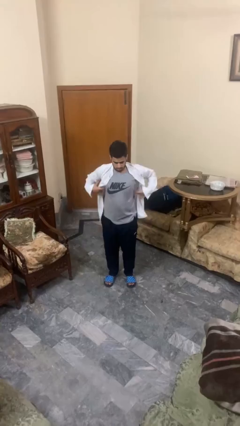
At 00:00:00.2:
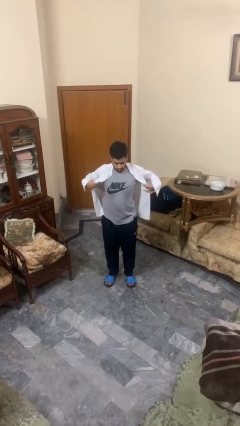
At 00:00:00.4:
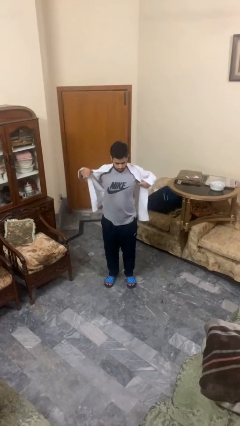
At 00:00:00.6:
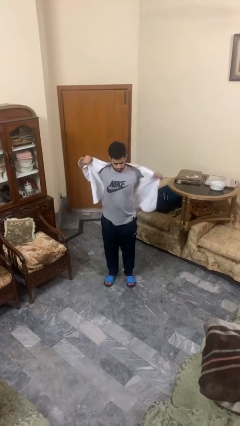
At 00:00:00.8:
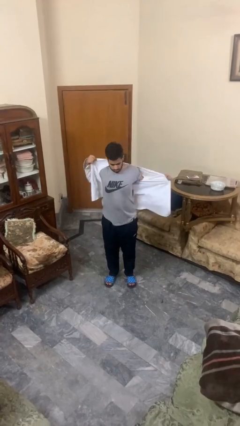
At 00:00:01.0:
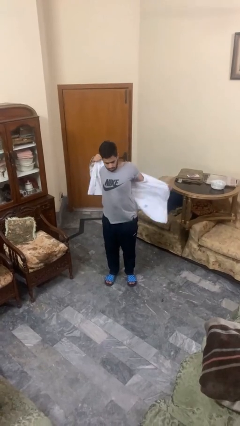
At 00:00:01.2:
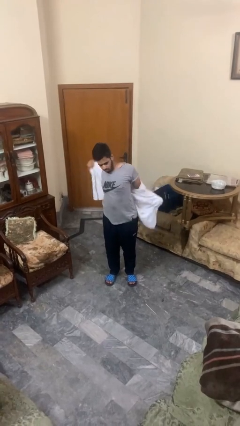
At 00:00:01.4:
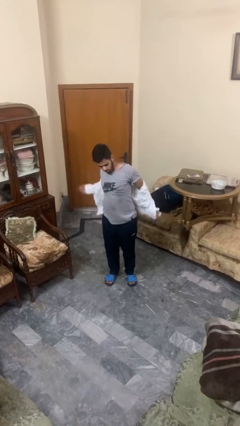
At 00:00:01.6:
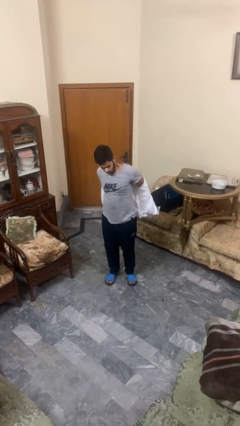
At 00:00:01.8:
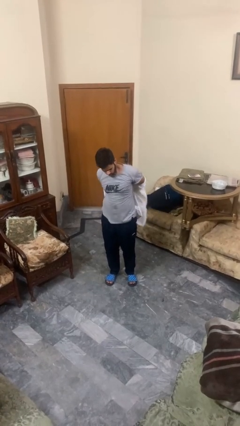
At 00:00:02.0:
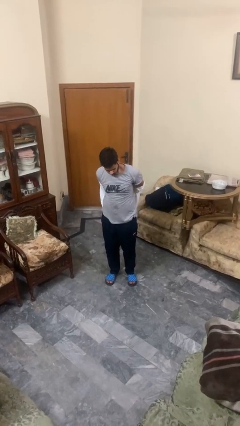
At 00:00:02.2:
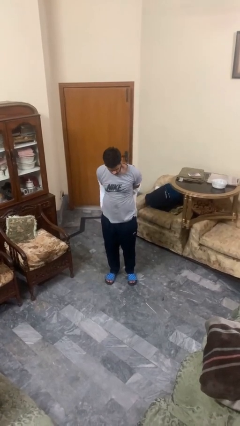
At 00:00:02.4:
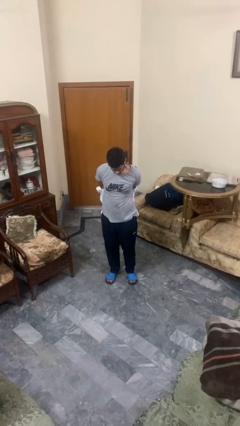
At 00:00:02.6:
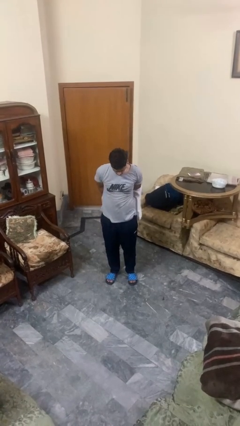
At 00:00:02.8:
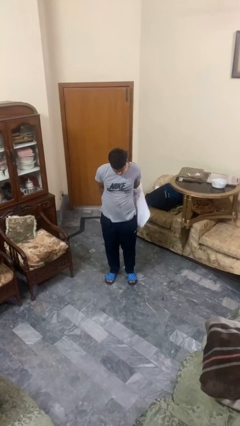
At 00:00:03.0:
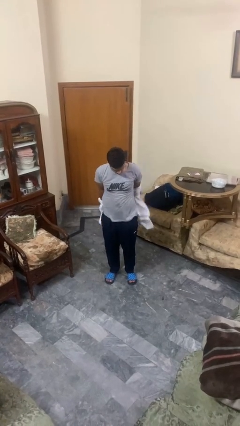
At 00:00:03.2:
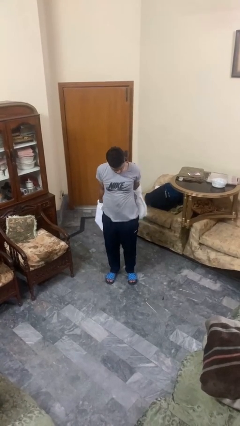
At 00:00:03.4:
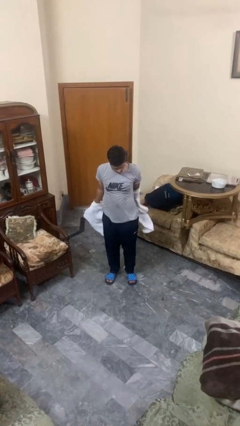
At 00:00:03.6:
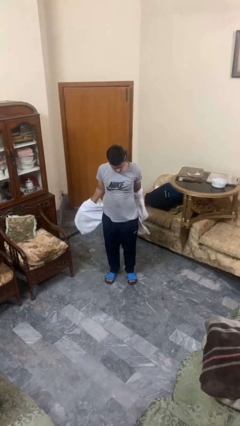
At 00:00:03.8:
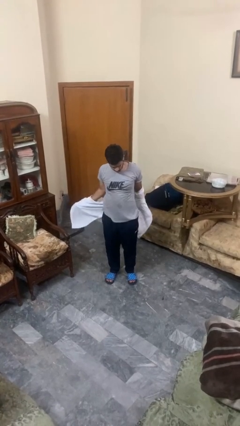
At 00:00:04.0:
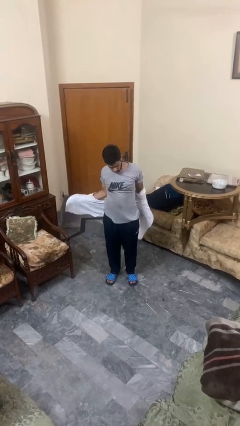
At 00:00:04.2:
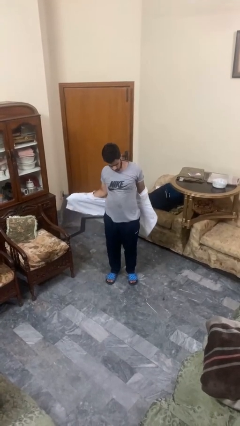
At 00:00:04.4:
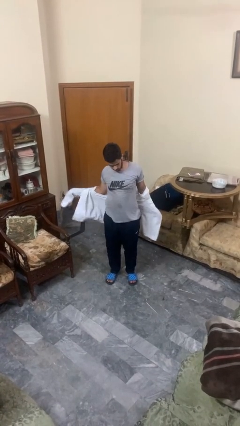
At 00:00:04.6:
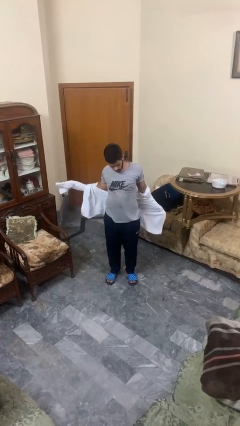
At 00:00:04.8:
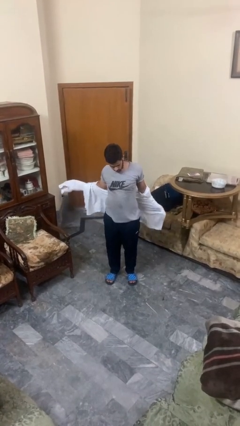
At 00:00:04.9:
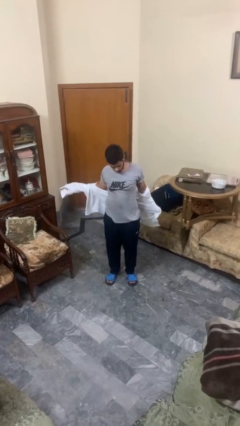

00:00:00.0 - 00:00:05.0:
person takes off shirt

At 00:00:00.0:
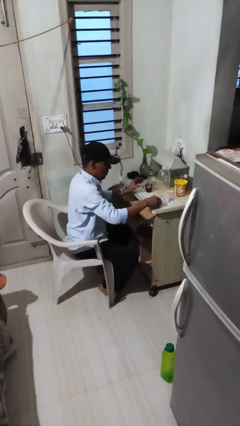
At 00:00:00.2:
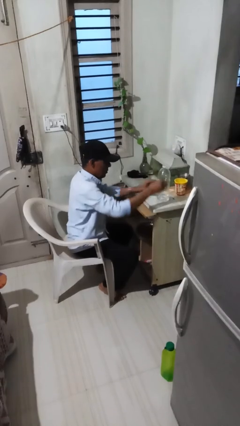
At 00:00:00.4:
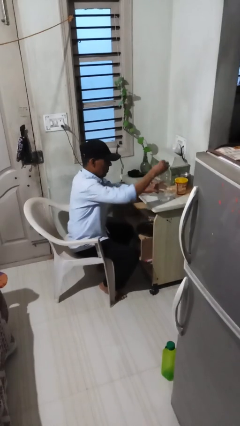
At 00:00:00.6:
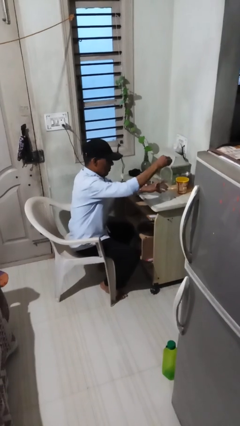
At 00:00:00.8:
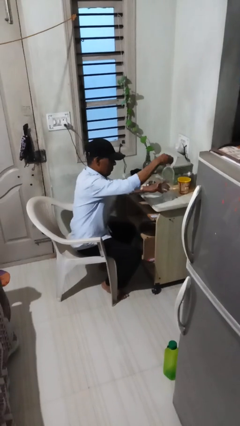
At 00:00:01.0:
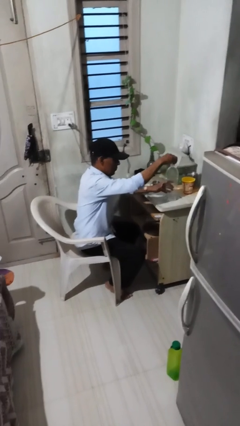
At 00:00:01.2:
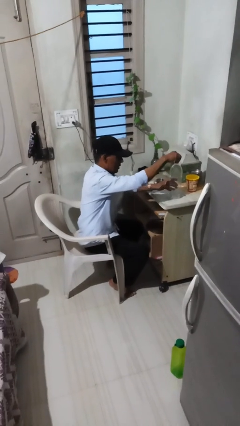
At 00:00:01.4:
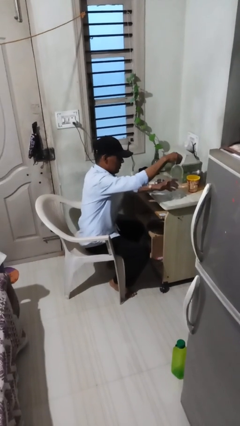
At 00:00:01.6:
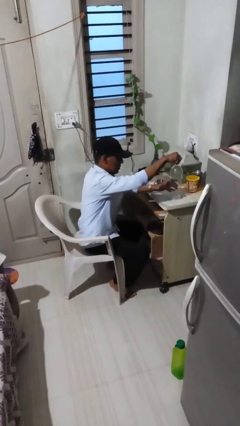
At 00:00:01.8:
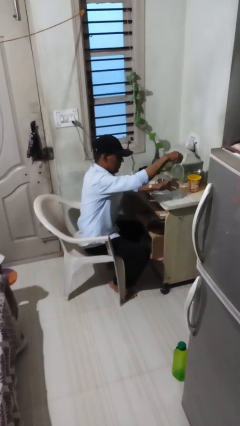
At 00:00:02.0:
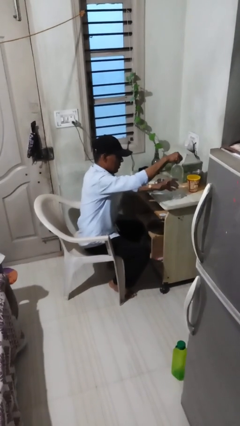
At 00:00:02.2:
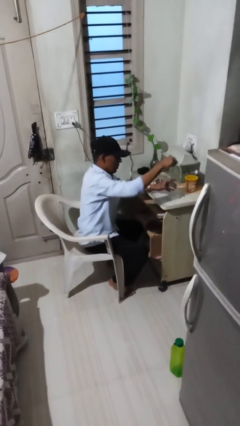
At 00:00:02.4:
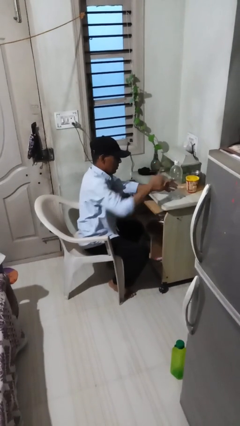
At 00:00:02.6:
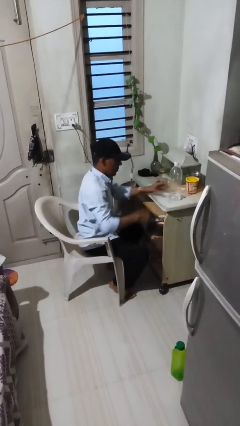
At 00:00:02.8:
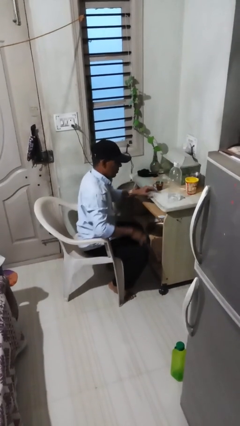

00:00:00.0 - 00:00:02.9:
person screws lid to bottle

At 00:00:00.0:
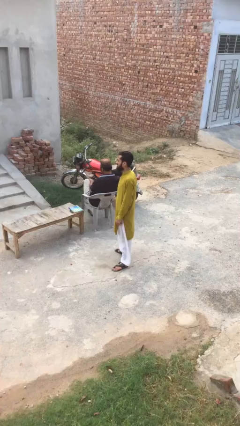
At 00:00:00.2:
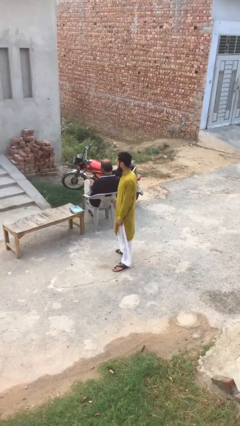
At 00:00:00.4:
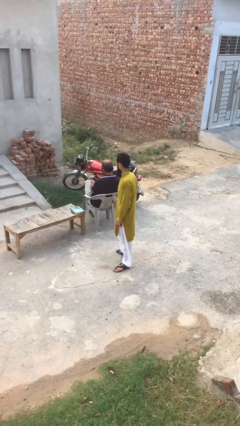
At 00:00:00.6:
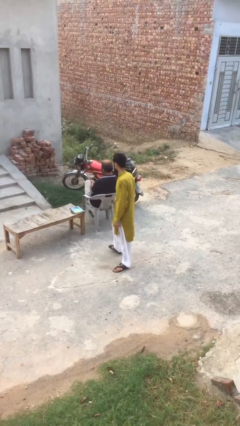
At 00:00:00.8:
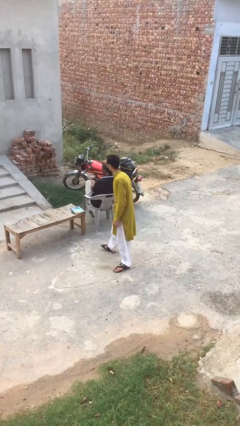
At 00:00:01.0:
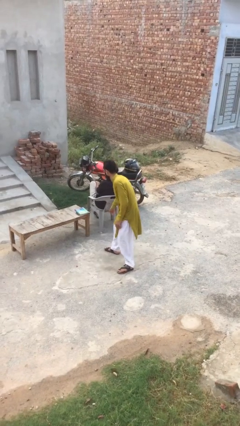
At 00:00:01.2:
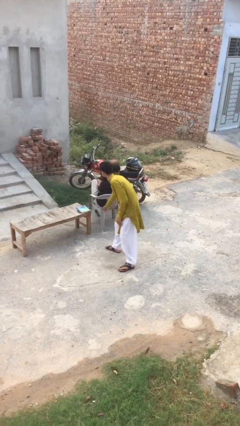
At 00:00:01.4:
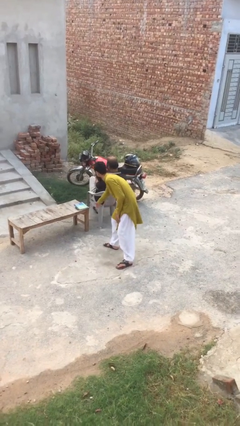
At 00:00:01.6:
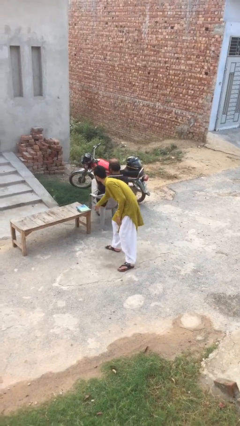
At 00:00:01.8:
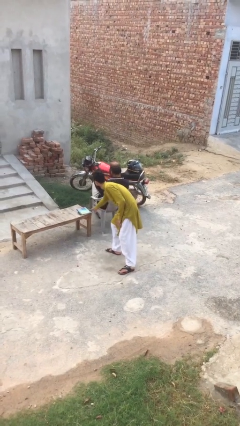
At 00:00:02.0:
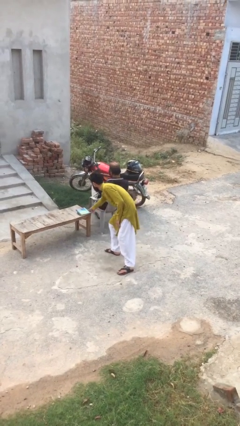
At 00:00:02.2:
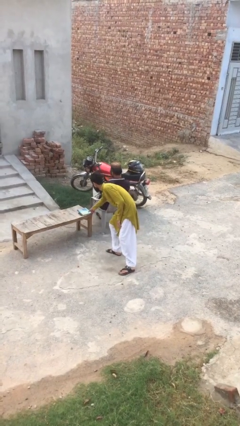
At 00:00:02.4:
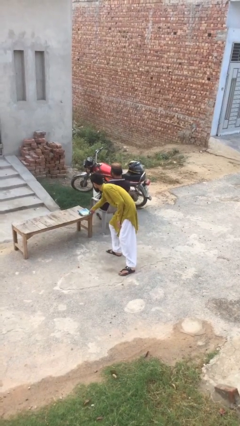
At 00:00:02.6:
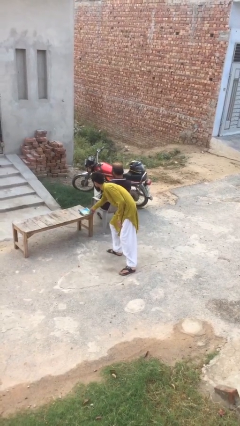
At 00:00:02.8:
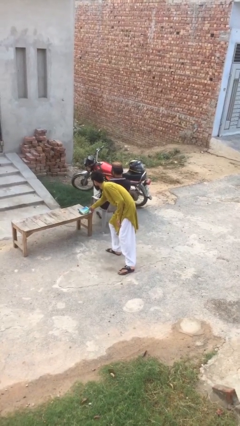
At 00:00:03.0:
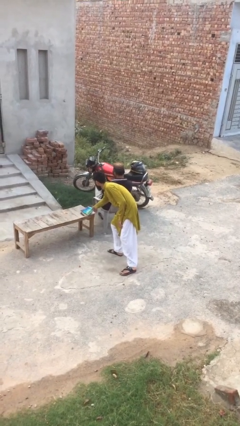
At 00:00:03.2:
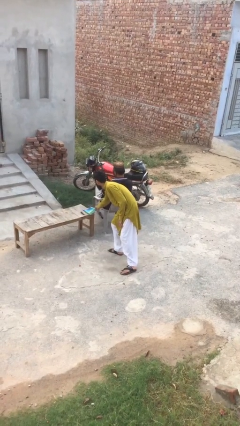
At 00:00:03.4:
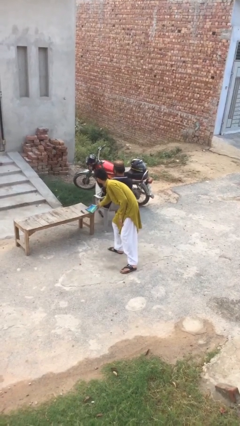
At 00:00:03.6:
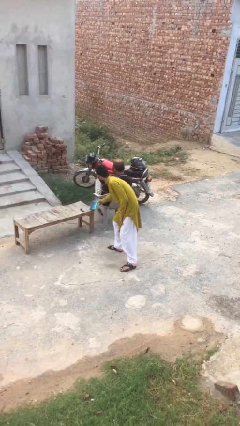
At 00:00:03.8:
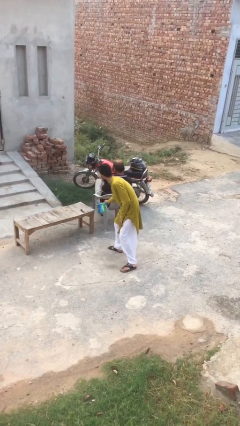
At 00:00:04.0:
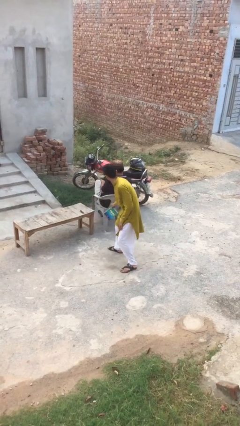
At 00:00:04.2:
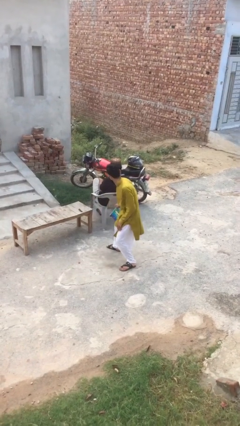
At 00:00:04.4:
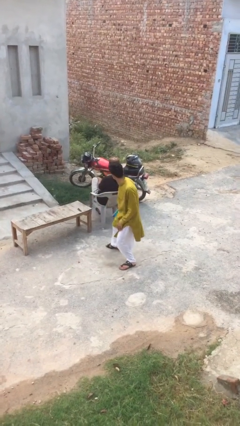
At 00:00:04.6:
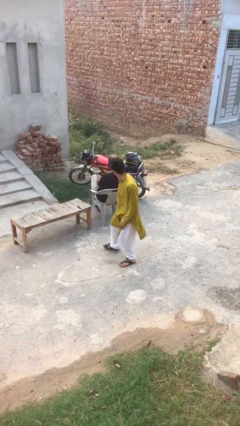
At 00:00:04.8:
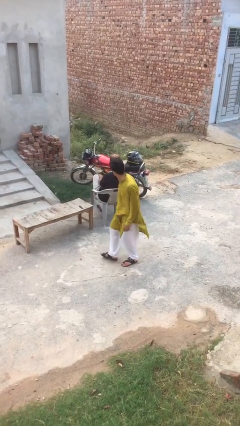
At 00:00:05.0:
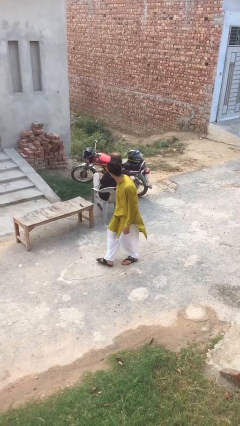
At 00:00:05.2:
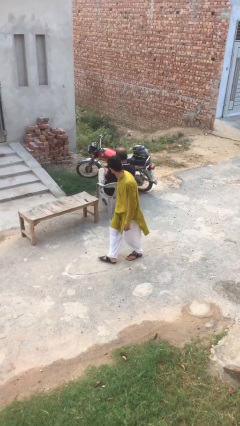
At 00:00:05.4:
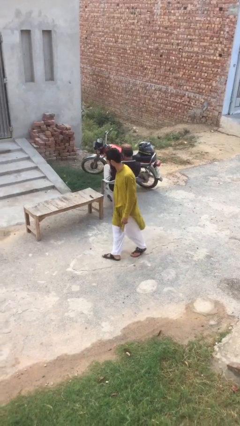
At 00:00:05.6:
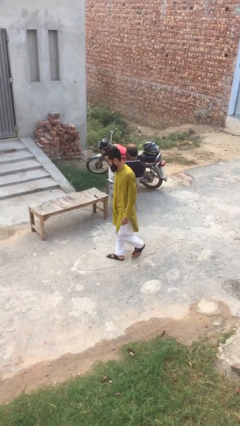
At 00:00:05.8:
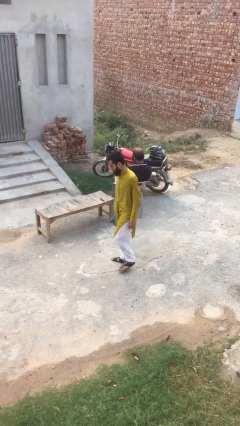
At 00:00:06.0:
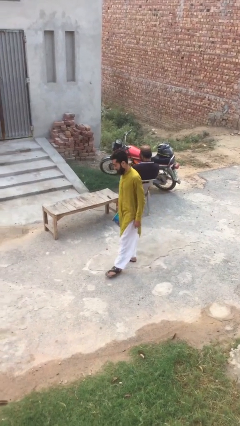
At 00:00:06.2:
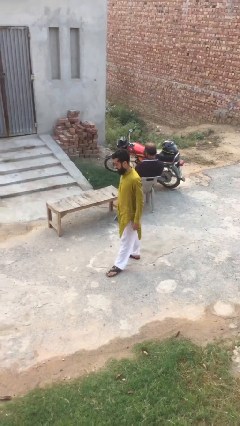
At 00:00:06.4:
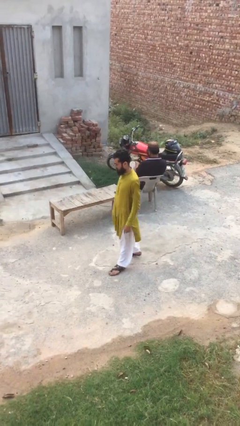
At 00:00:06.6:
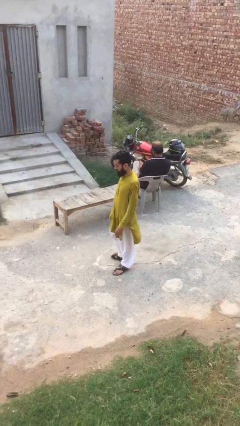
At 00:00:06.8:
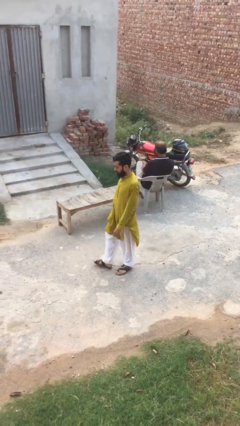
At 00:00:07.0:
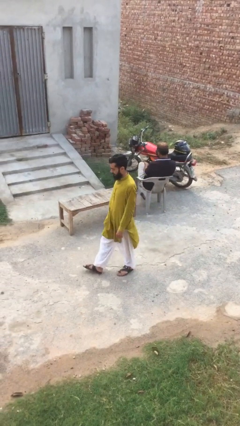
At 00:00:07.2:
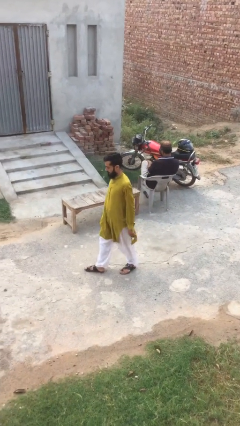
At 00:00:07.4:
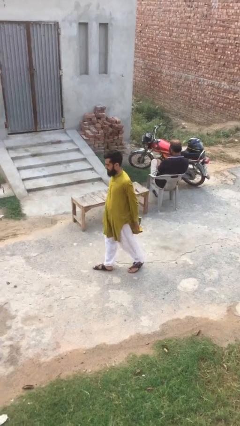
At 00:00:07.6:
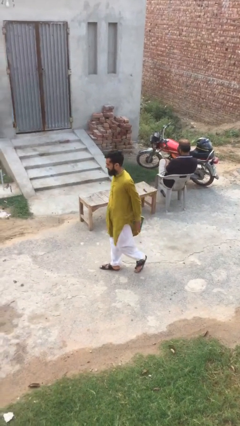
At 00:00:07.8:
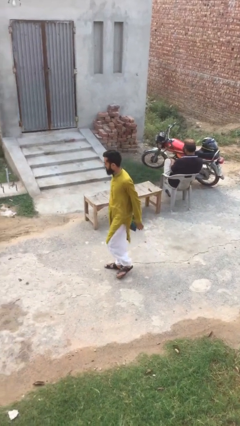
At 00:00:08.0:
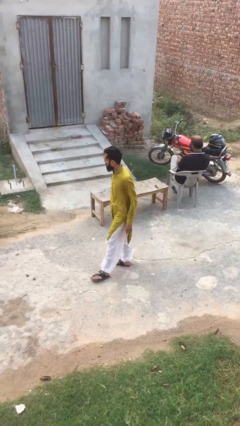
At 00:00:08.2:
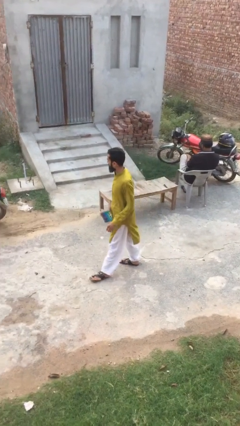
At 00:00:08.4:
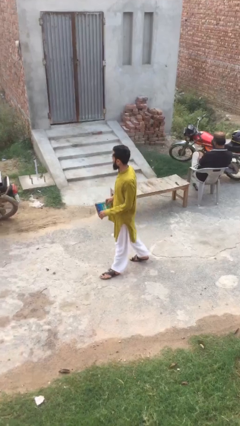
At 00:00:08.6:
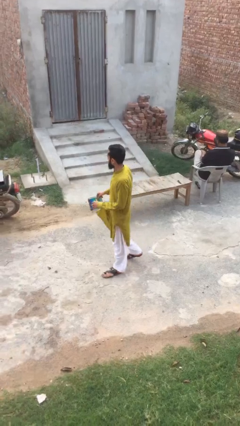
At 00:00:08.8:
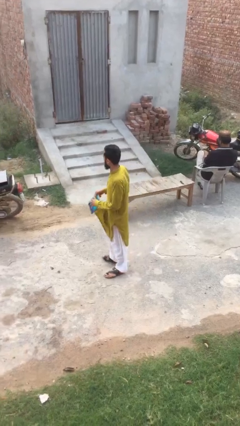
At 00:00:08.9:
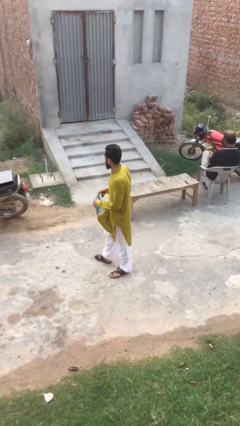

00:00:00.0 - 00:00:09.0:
person steals object from person

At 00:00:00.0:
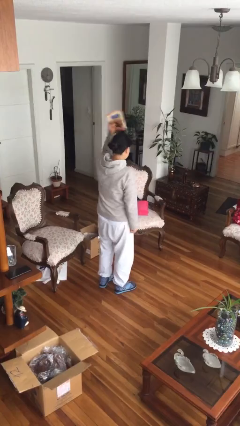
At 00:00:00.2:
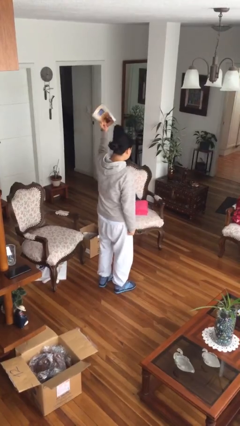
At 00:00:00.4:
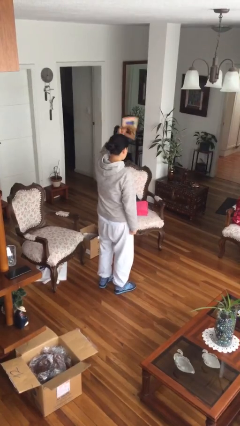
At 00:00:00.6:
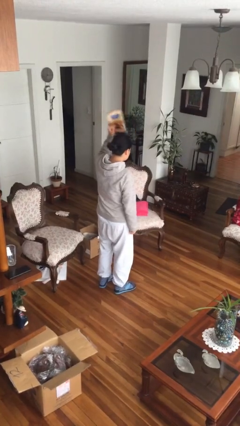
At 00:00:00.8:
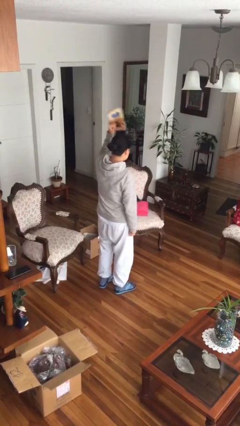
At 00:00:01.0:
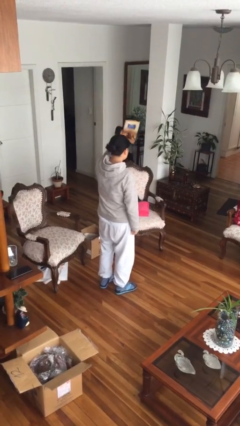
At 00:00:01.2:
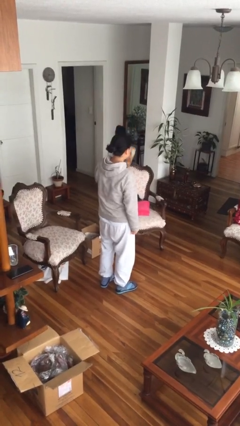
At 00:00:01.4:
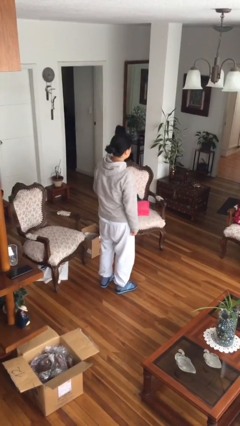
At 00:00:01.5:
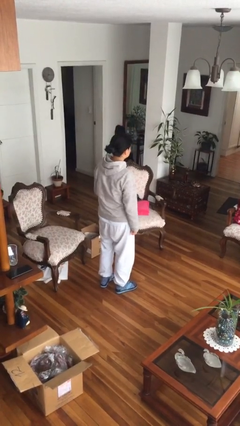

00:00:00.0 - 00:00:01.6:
person holds object above head
